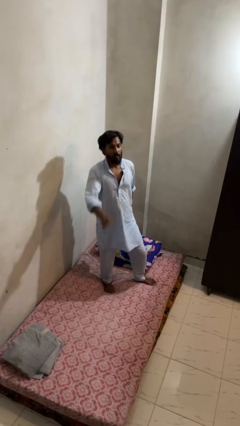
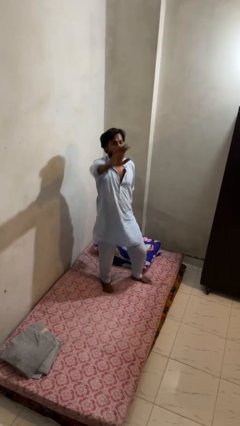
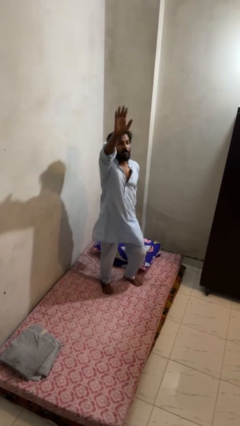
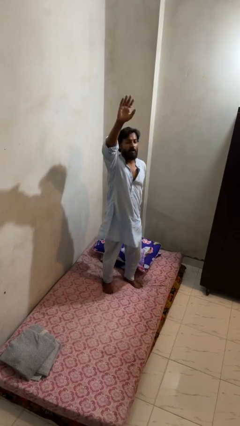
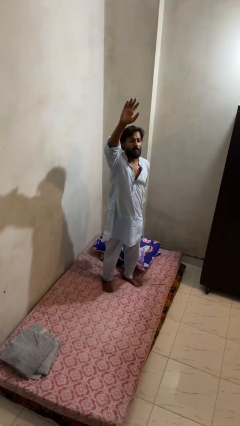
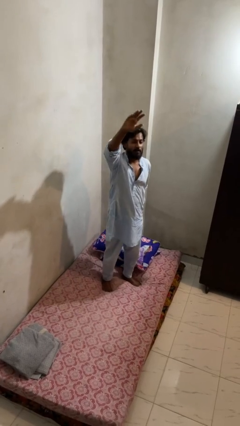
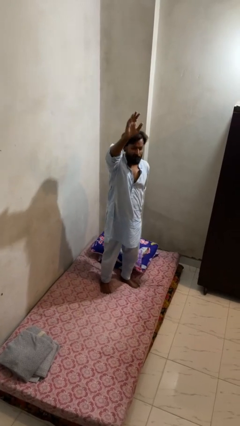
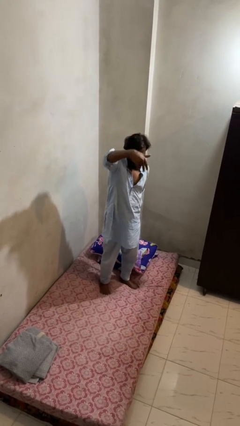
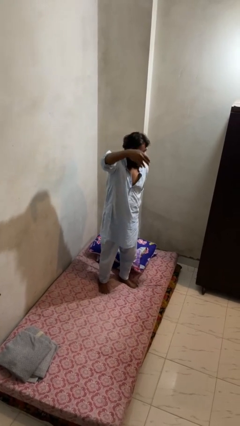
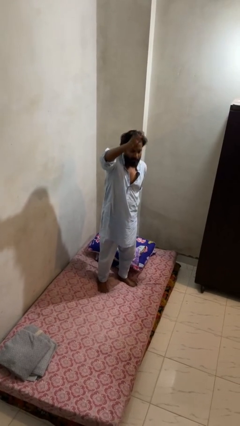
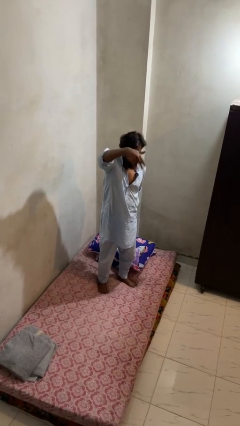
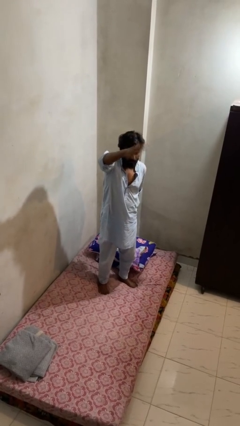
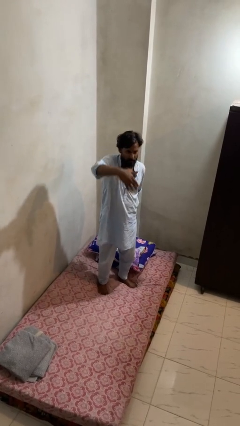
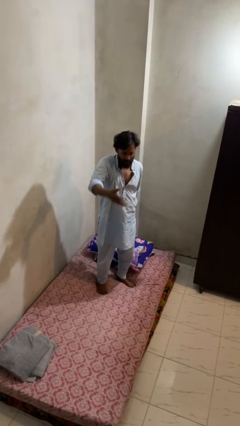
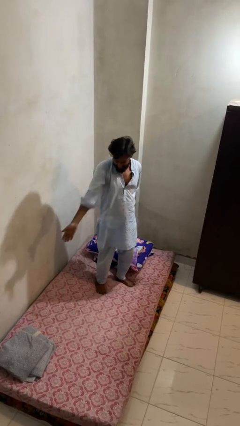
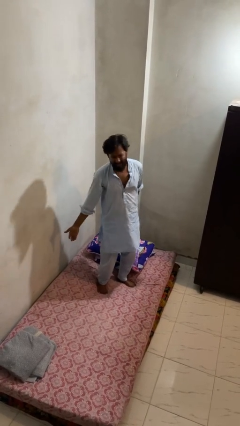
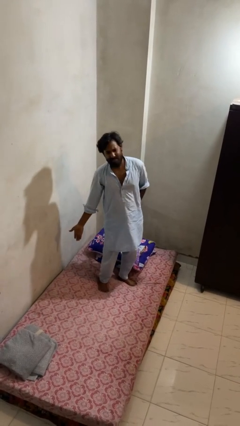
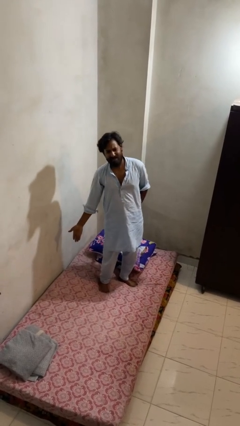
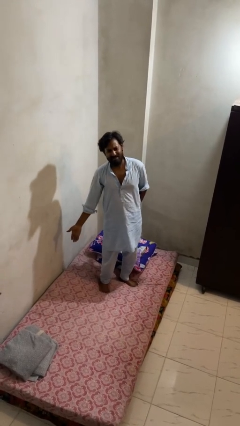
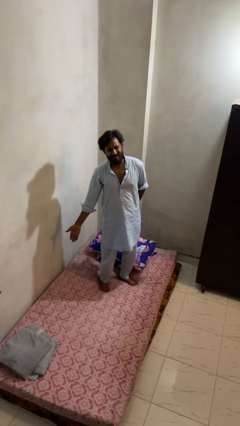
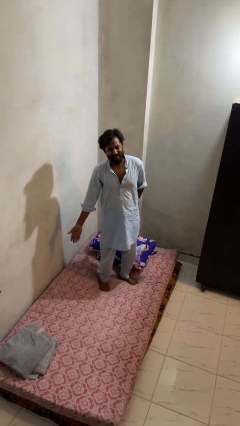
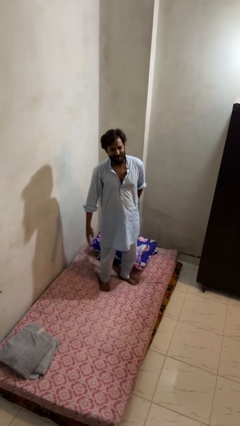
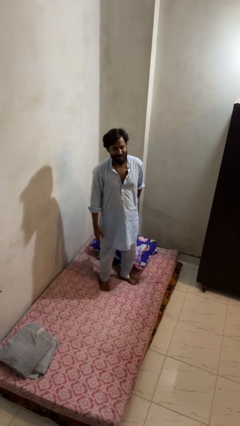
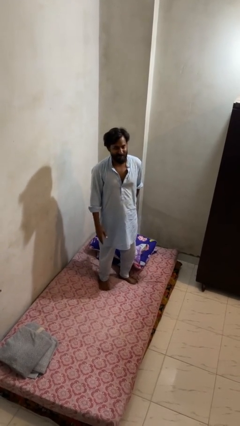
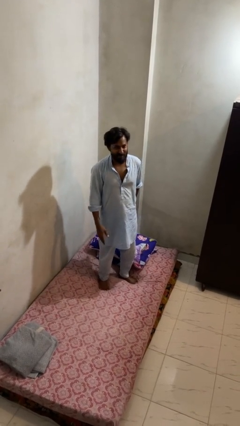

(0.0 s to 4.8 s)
person gestures come here

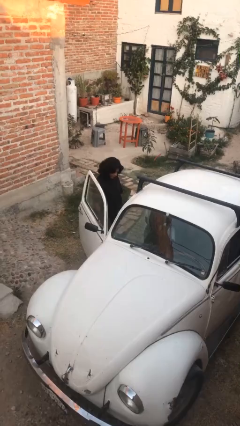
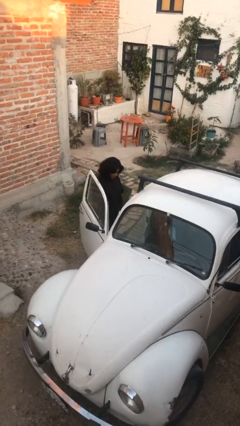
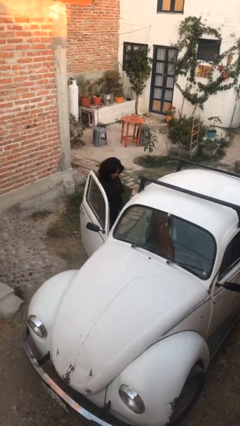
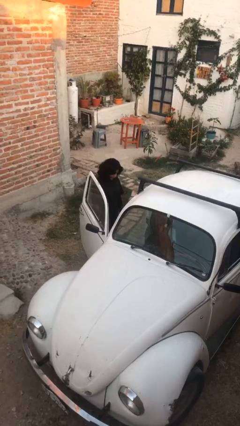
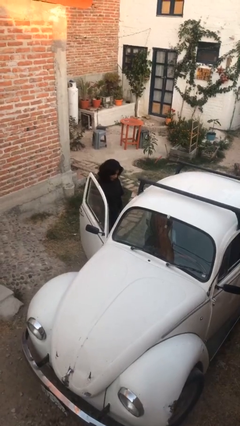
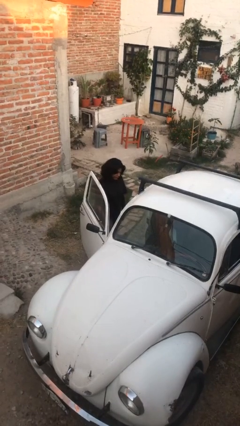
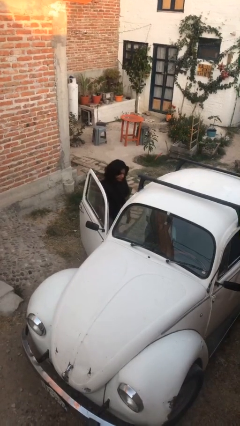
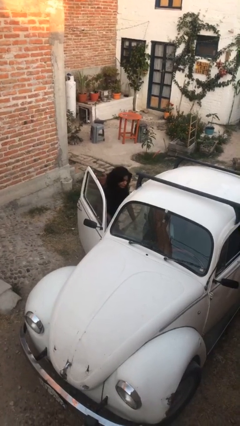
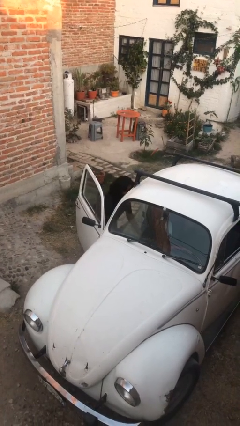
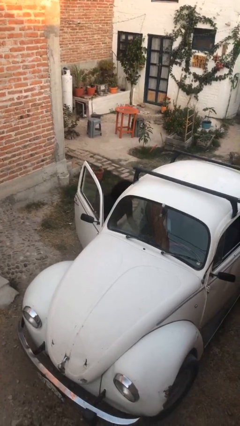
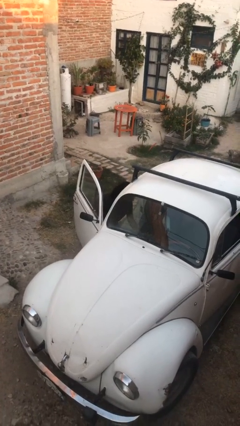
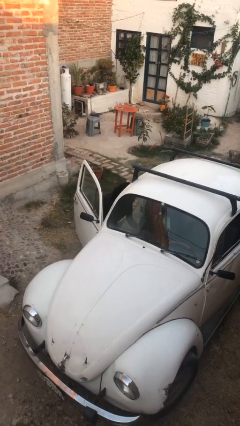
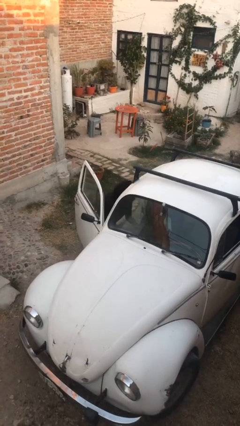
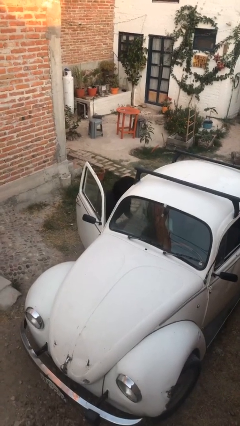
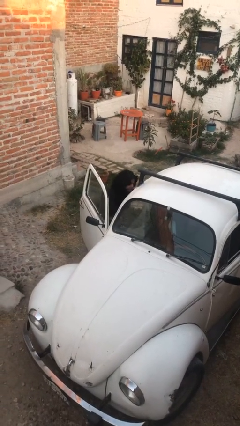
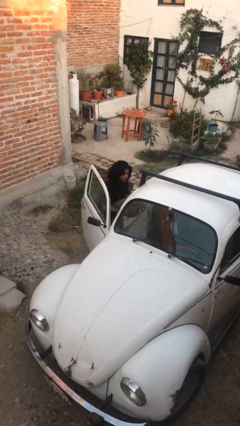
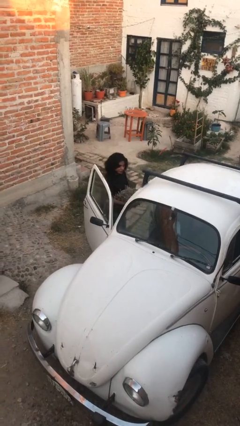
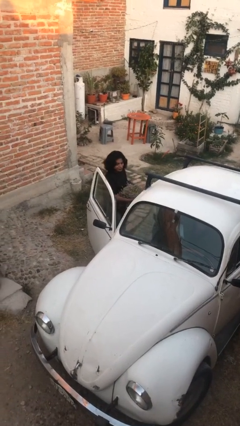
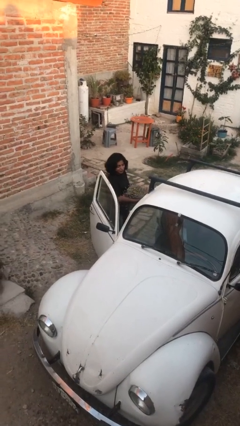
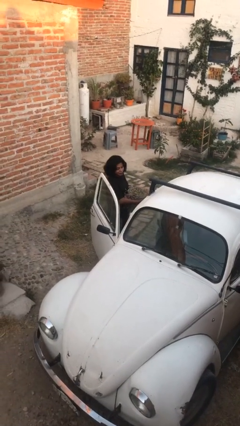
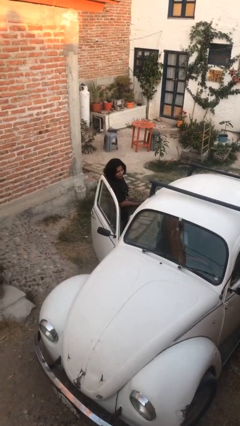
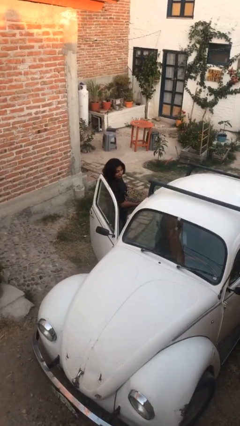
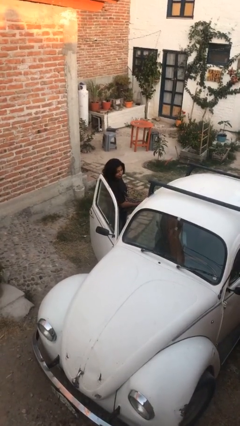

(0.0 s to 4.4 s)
person unloads car

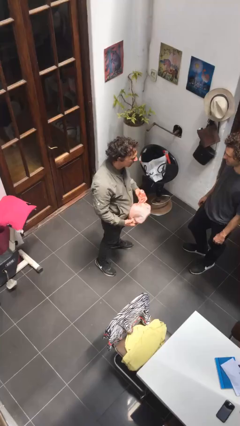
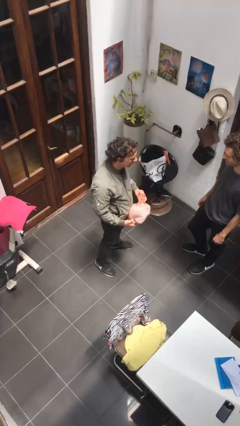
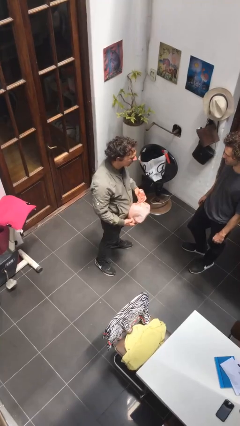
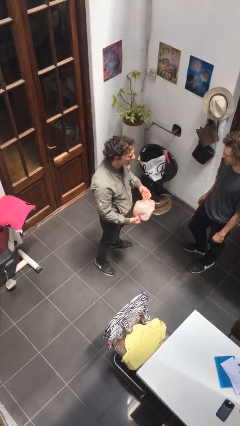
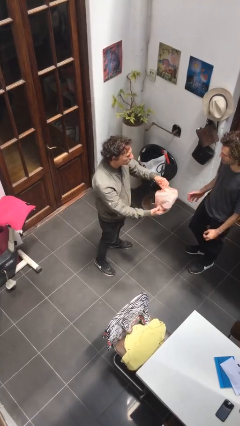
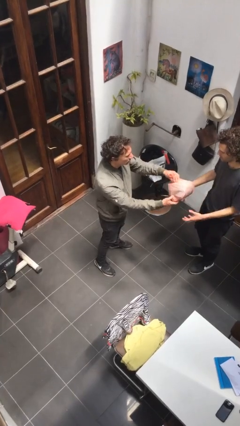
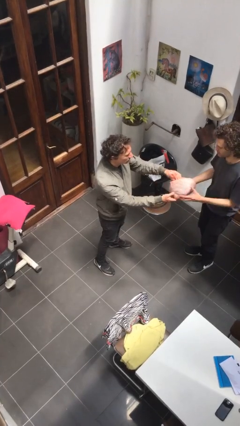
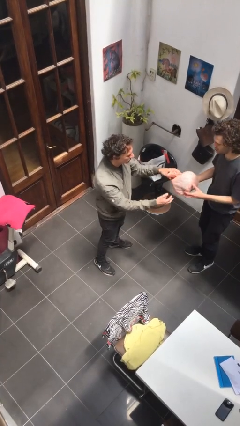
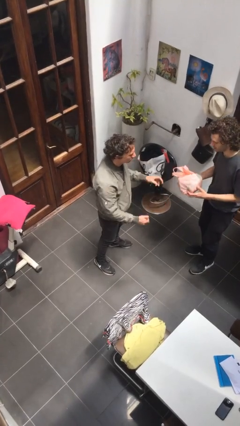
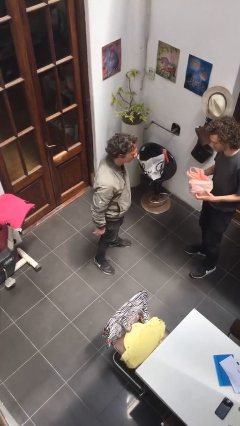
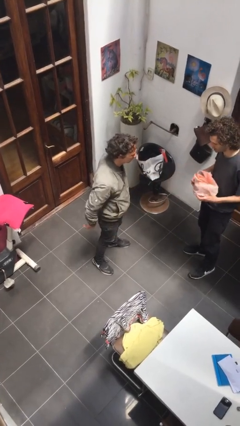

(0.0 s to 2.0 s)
person transfers object to person

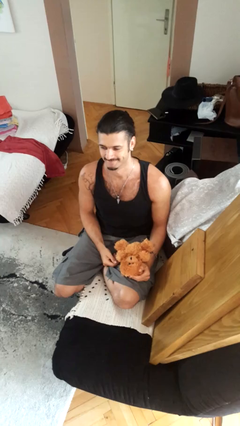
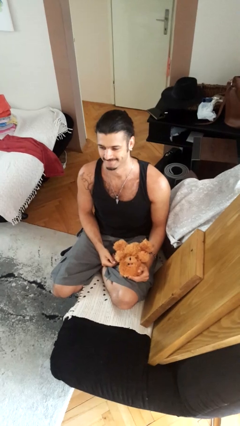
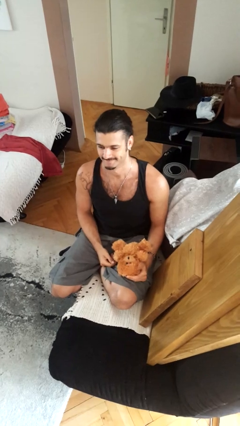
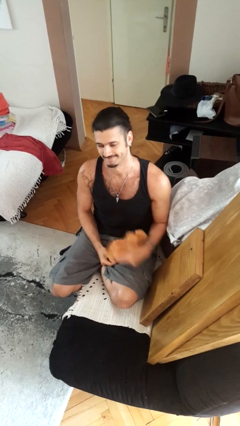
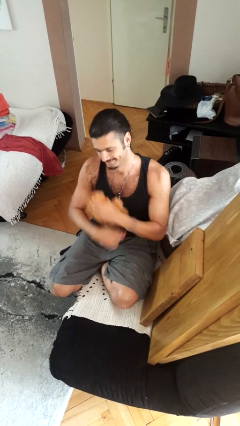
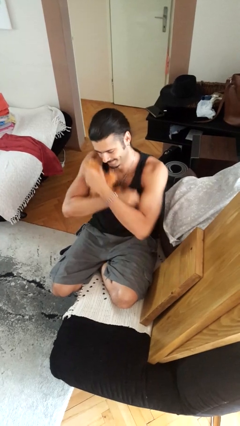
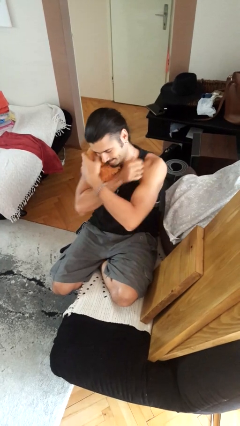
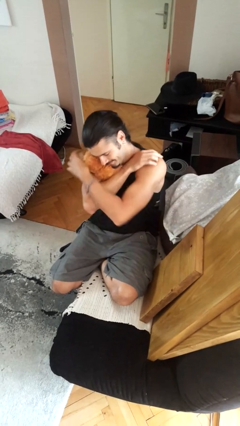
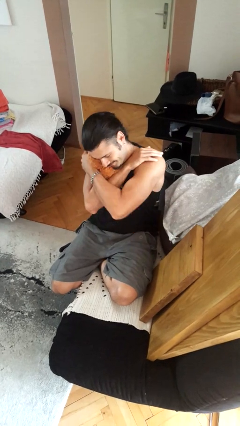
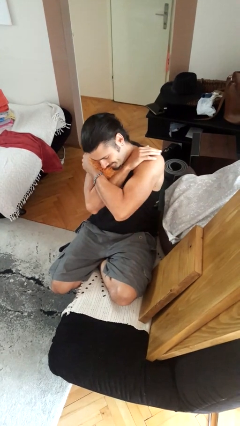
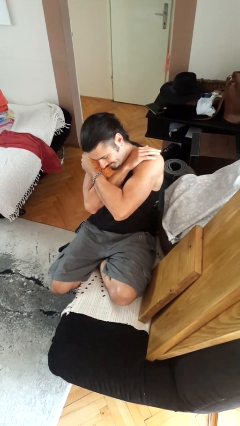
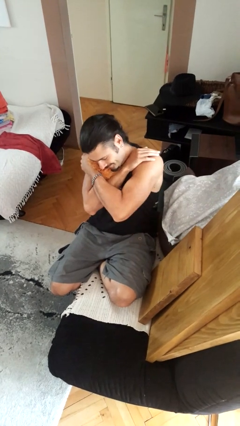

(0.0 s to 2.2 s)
person hugs stuffed animal

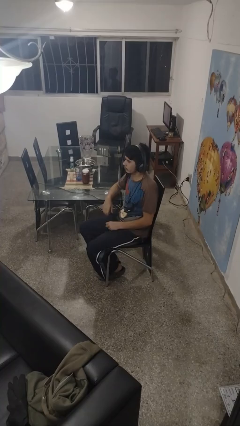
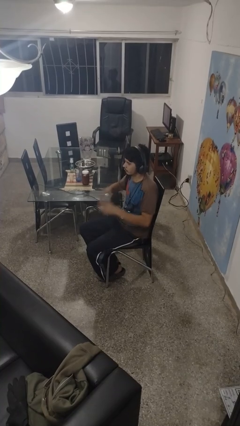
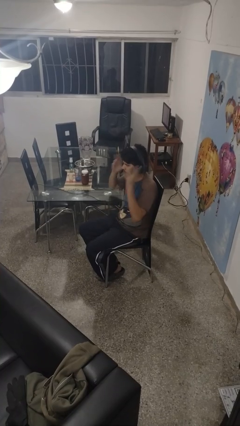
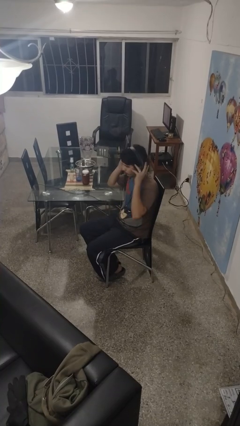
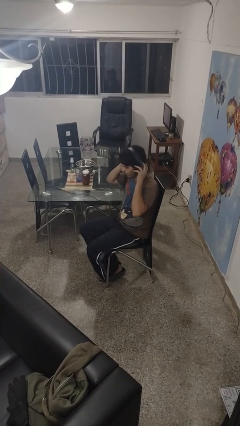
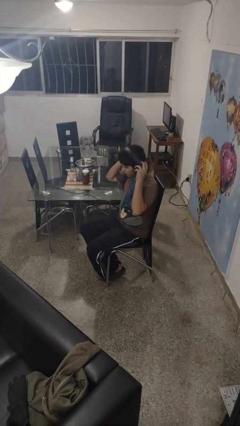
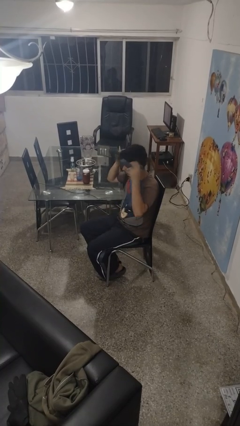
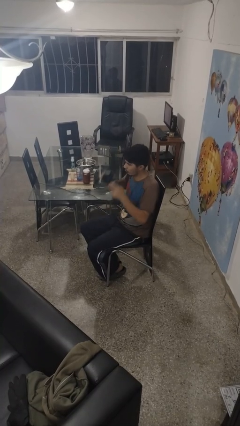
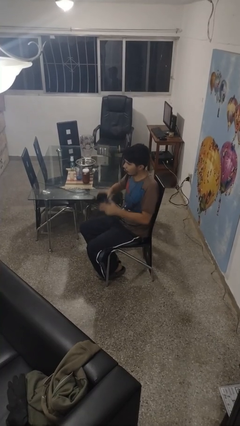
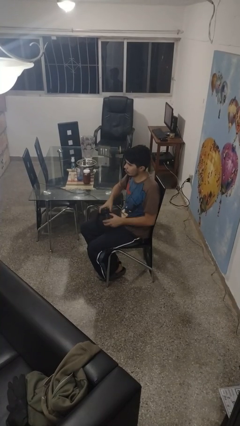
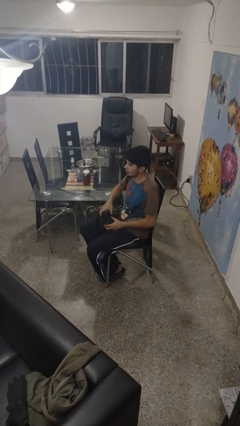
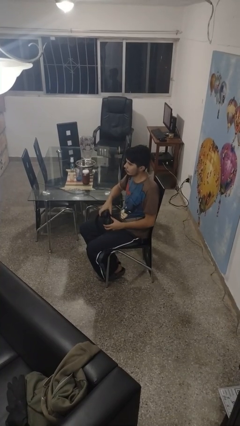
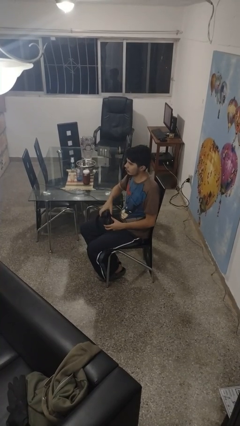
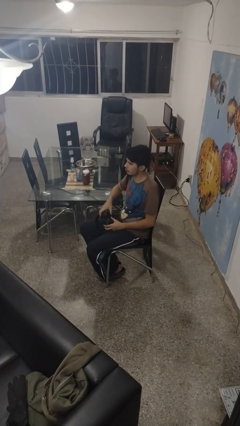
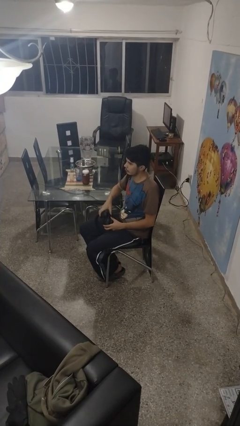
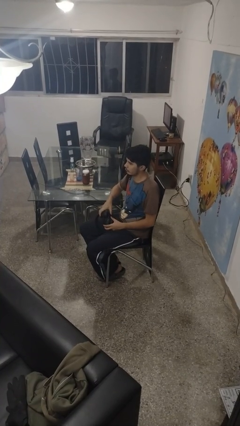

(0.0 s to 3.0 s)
person takes off headphones

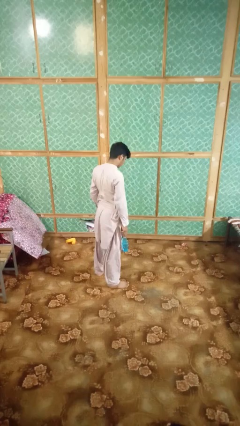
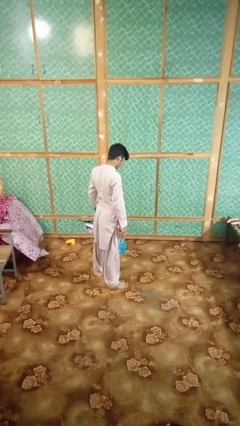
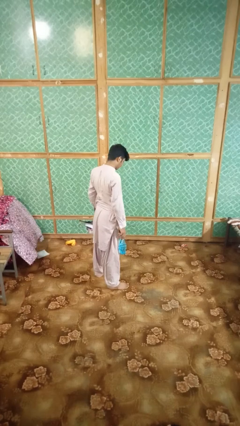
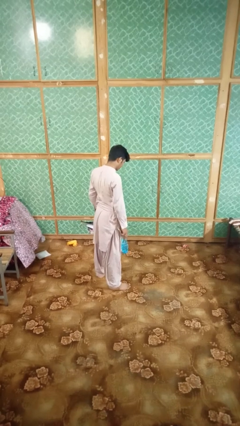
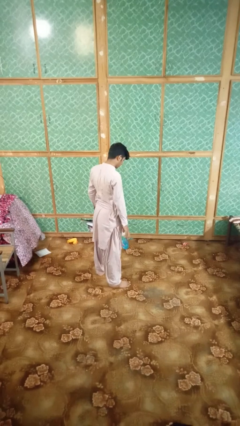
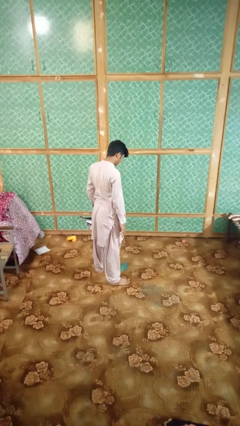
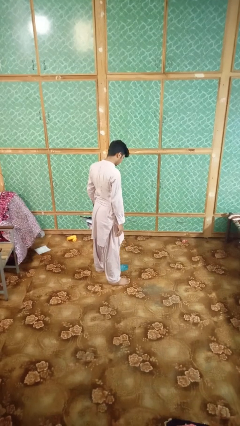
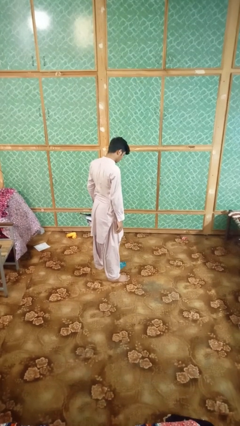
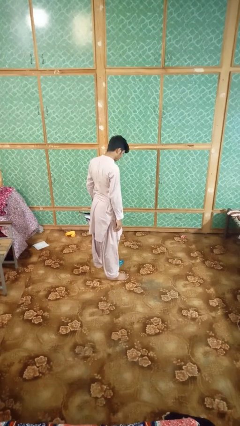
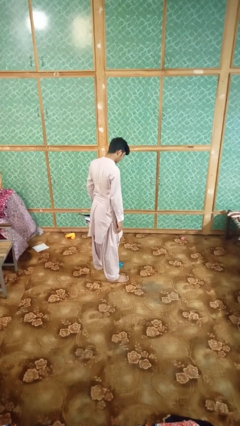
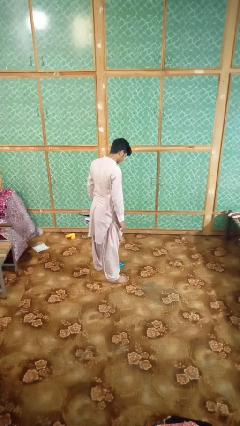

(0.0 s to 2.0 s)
person drops object
